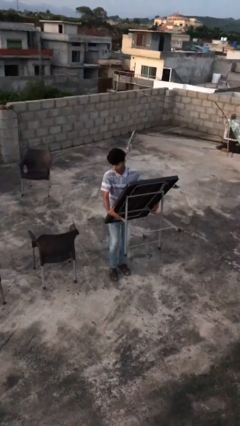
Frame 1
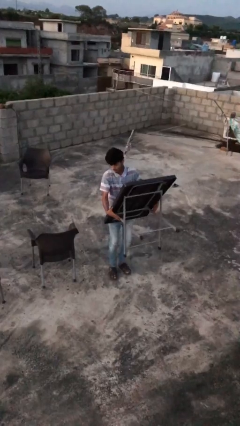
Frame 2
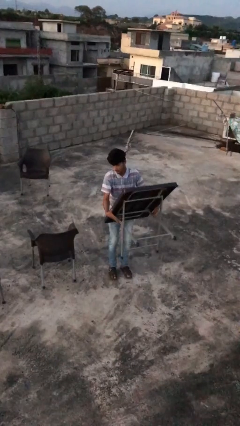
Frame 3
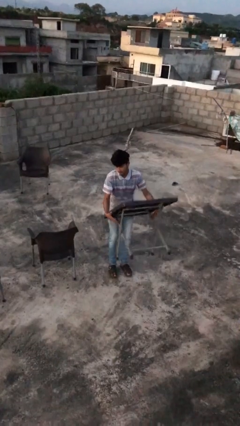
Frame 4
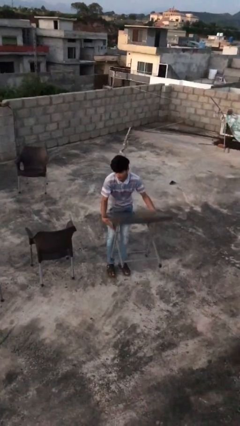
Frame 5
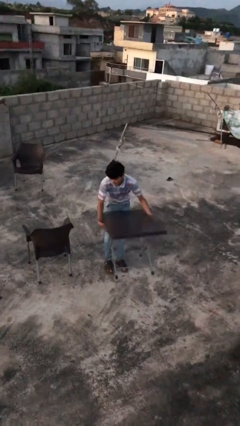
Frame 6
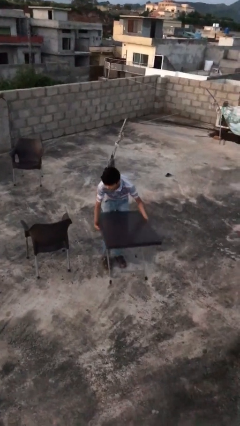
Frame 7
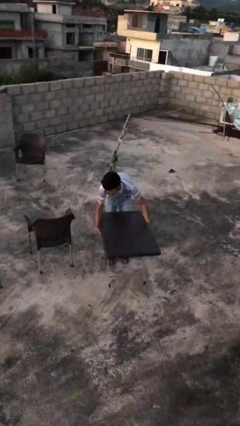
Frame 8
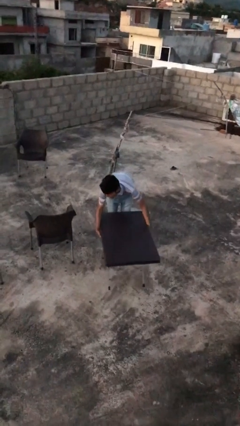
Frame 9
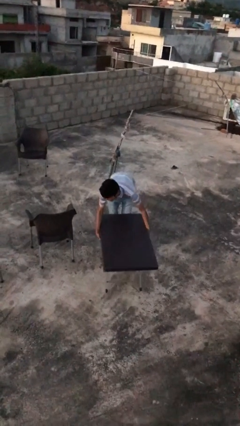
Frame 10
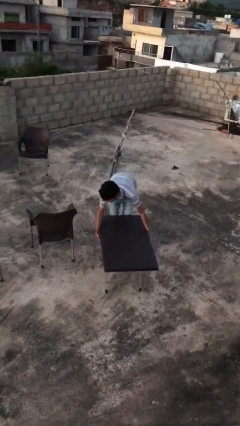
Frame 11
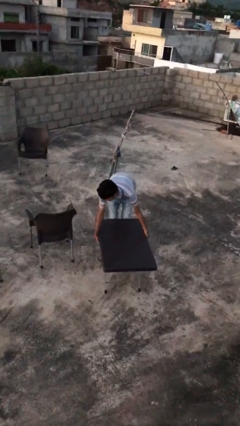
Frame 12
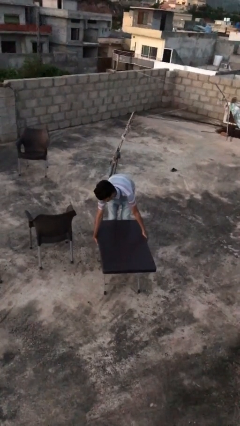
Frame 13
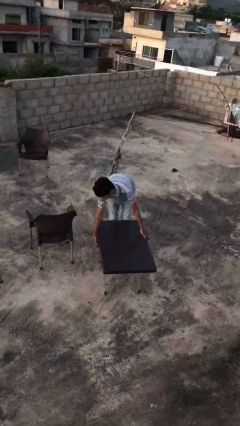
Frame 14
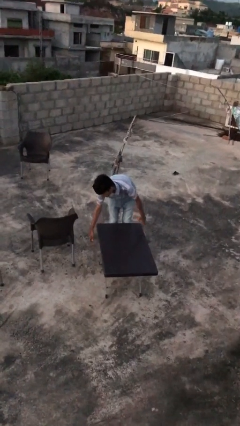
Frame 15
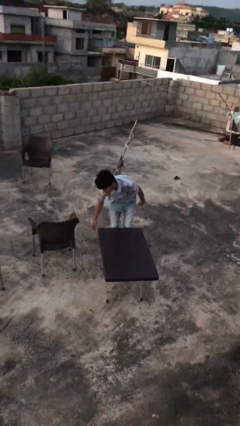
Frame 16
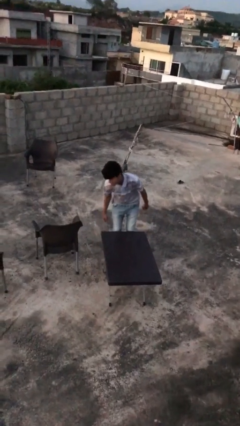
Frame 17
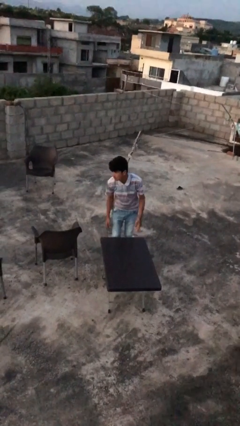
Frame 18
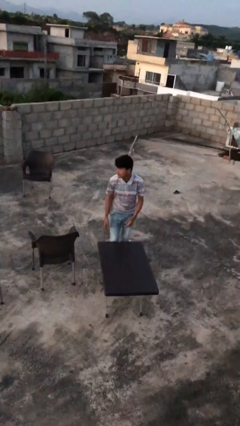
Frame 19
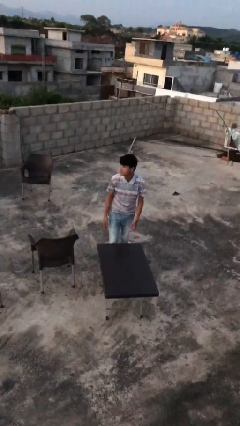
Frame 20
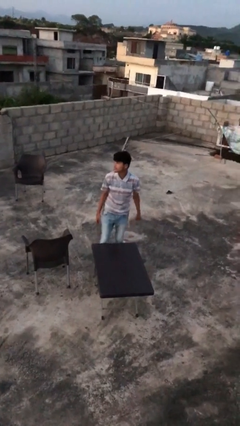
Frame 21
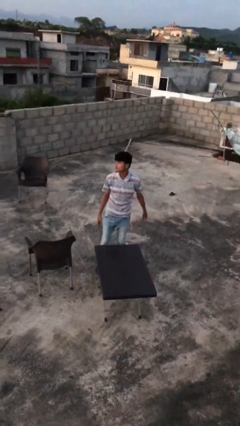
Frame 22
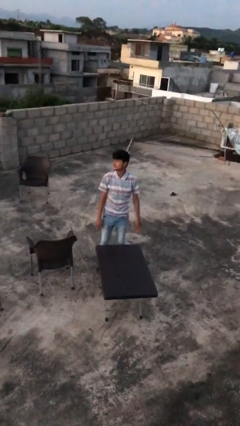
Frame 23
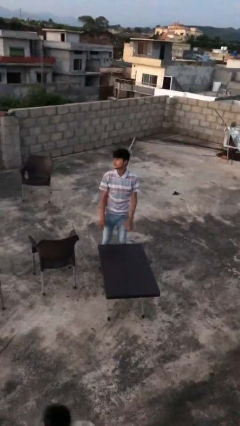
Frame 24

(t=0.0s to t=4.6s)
person puts down object on floor

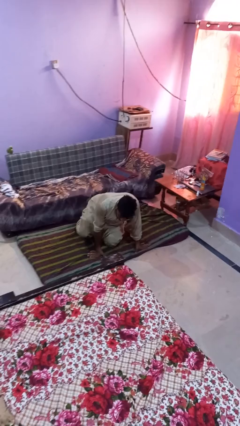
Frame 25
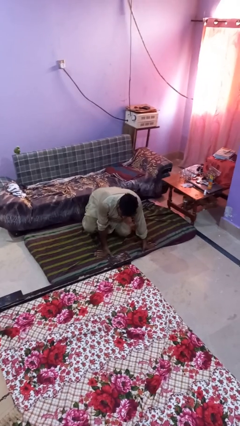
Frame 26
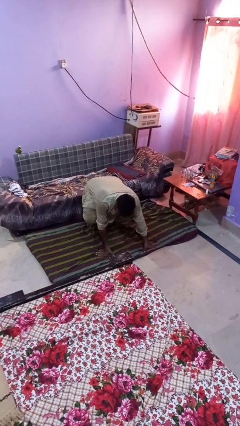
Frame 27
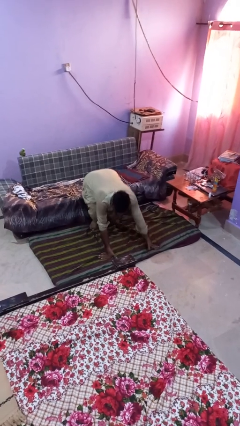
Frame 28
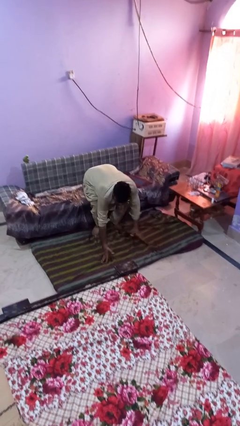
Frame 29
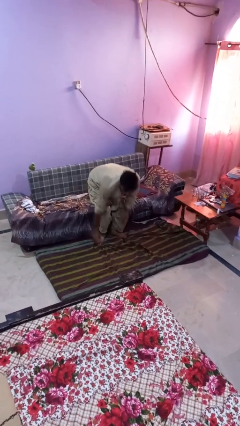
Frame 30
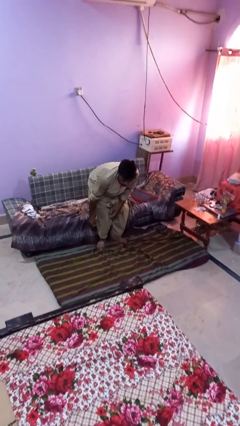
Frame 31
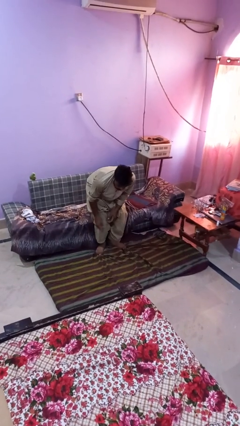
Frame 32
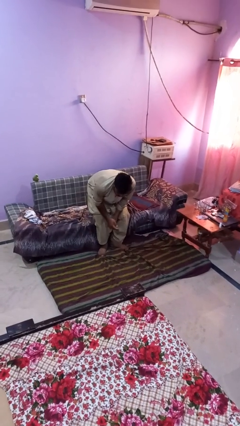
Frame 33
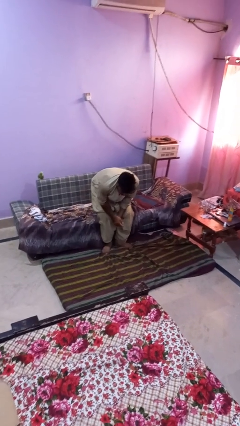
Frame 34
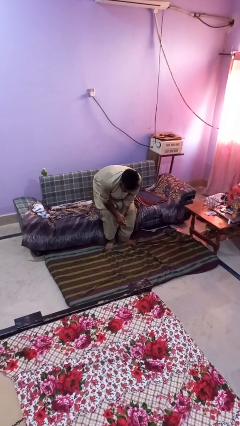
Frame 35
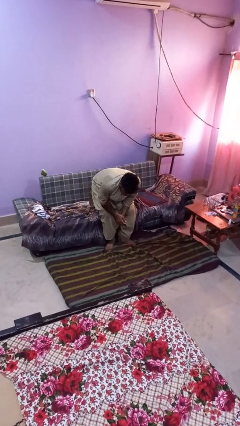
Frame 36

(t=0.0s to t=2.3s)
person stands up from floor

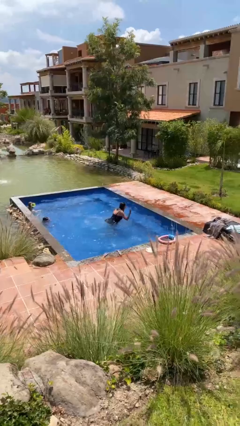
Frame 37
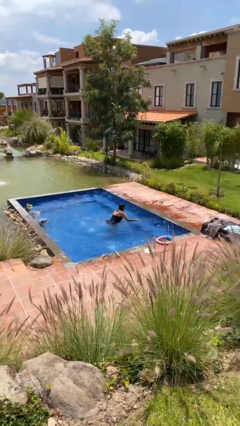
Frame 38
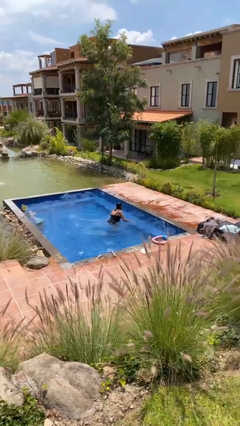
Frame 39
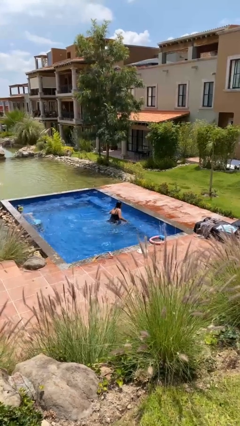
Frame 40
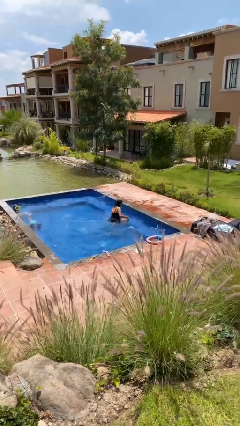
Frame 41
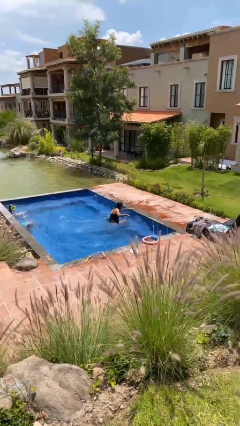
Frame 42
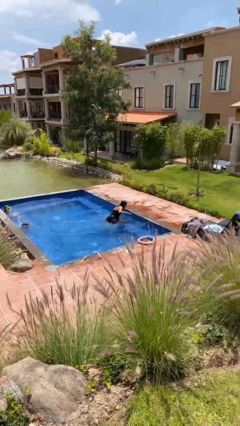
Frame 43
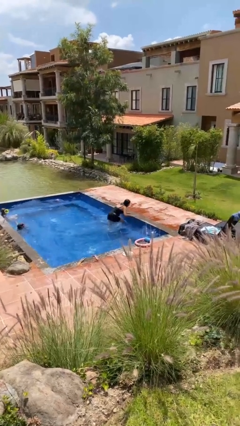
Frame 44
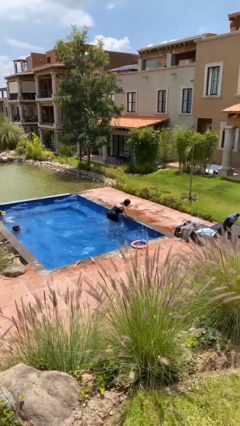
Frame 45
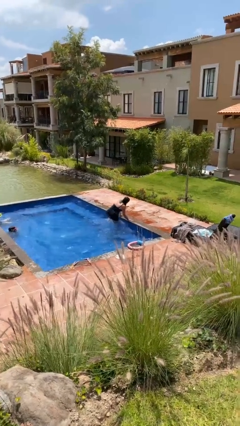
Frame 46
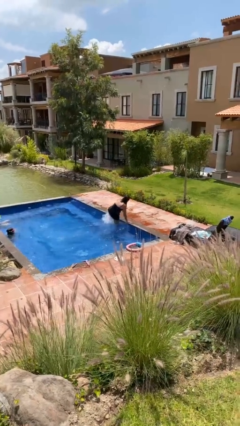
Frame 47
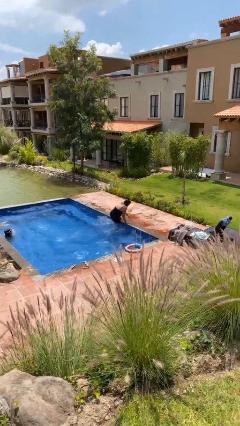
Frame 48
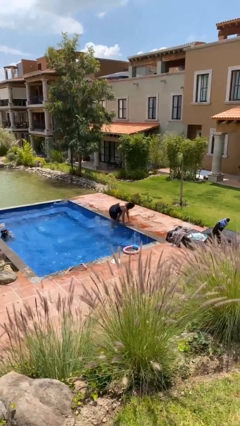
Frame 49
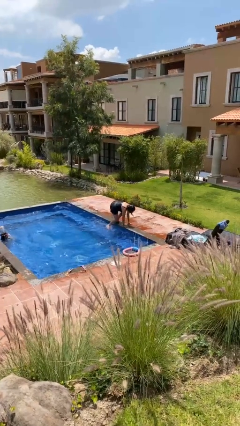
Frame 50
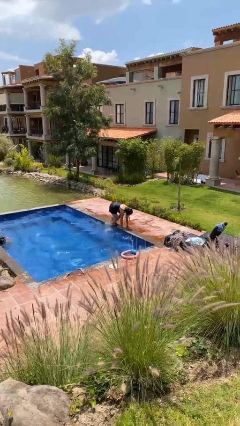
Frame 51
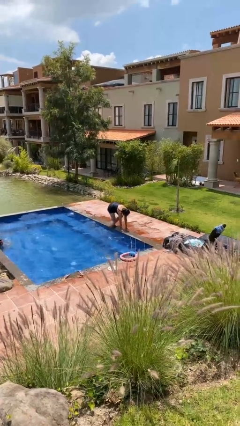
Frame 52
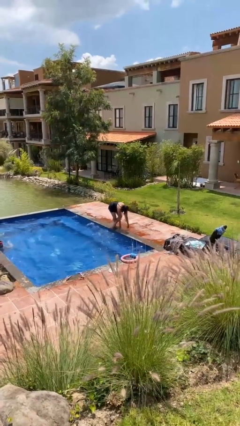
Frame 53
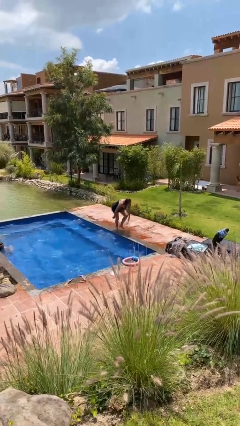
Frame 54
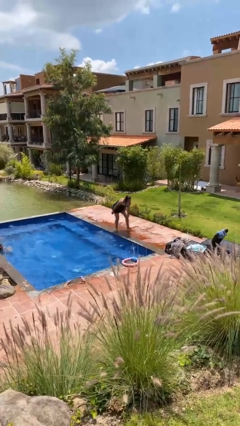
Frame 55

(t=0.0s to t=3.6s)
person exits pool

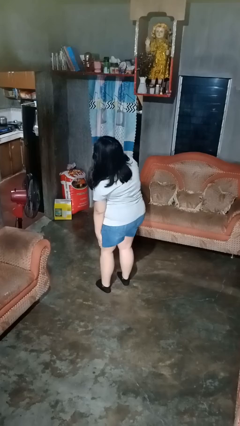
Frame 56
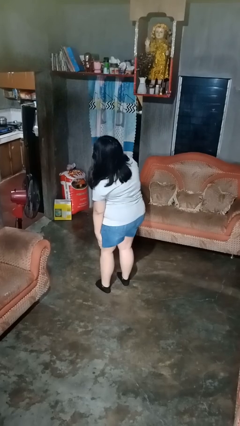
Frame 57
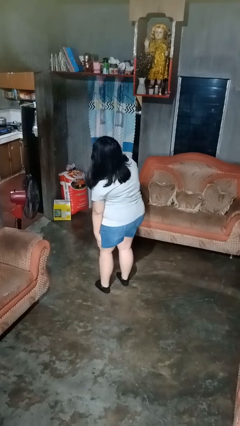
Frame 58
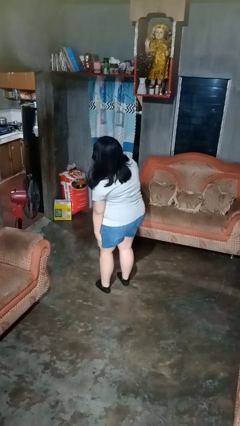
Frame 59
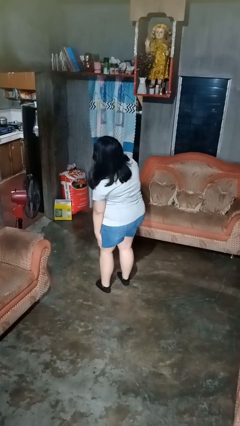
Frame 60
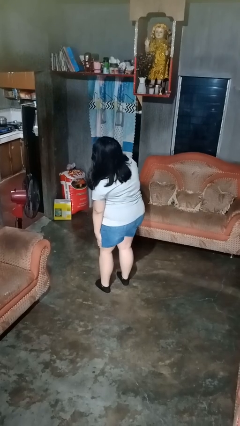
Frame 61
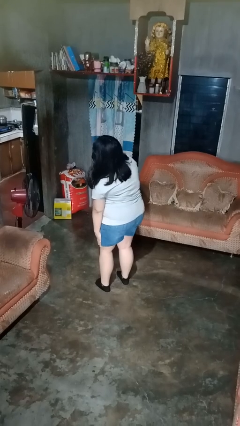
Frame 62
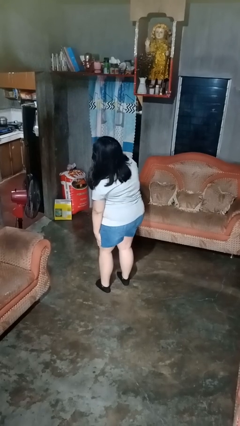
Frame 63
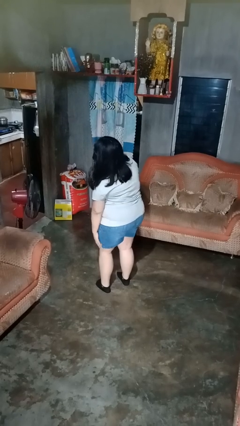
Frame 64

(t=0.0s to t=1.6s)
person swats bug

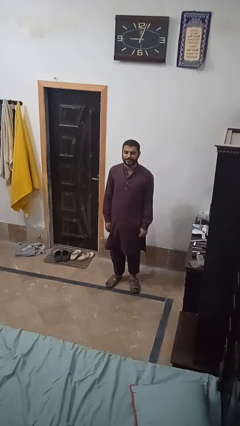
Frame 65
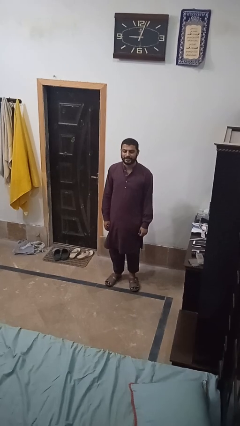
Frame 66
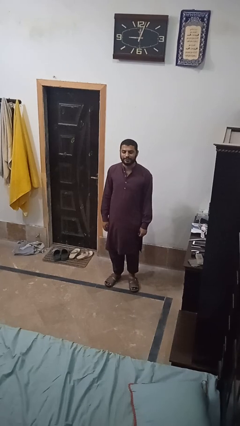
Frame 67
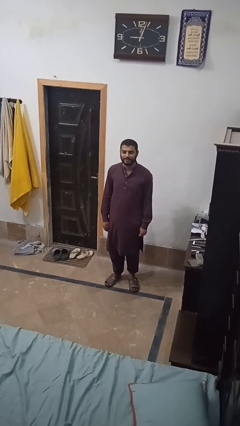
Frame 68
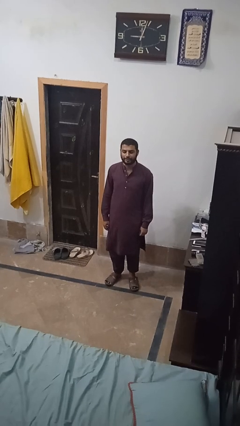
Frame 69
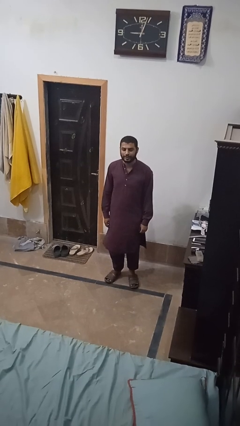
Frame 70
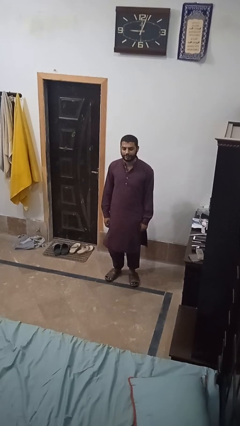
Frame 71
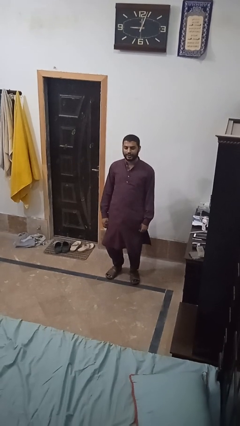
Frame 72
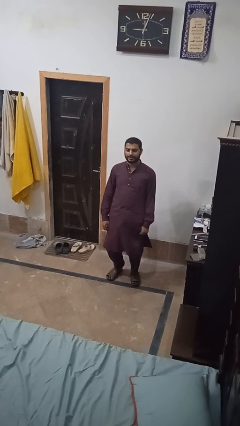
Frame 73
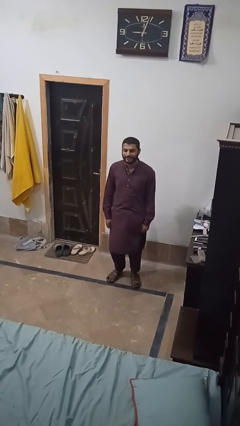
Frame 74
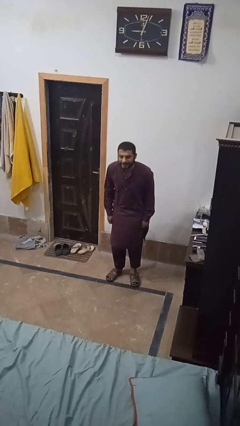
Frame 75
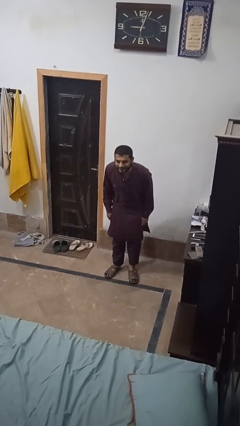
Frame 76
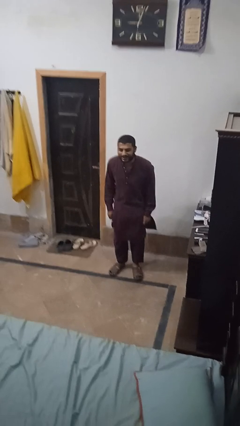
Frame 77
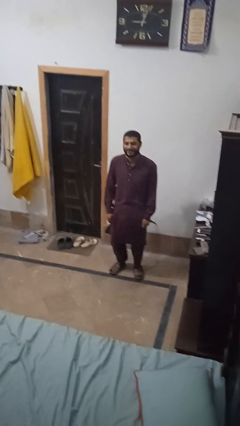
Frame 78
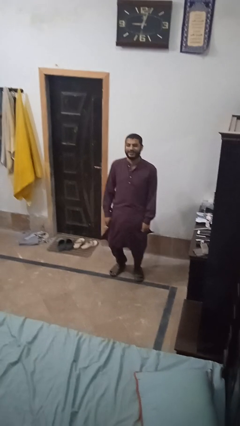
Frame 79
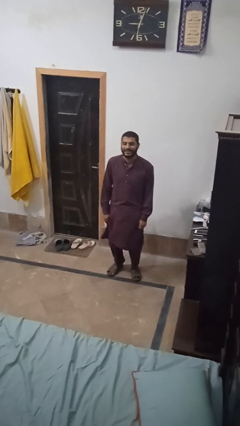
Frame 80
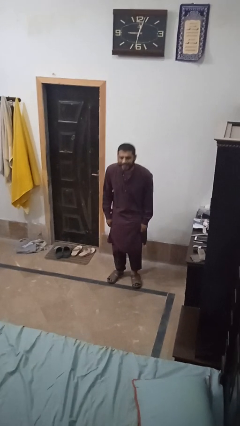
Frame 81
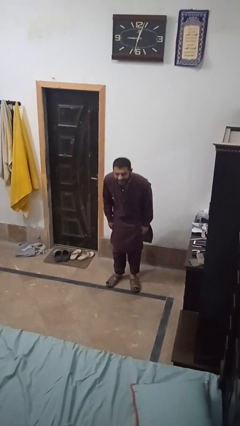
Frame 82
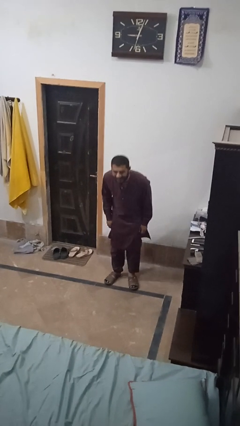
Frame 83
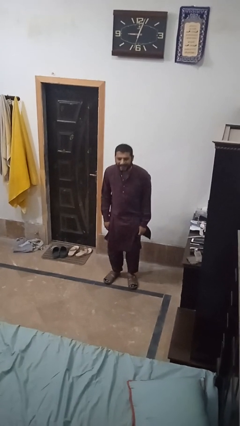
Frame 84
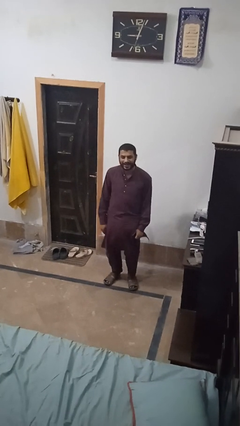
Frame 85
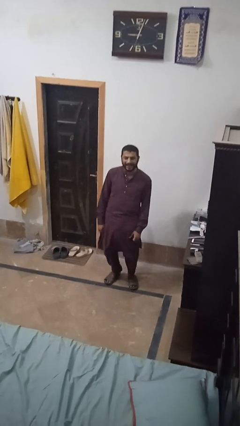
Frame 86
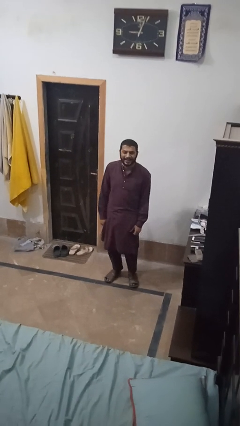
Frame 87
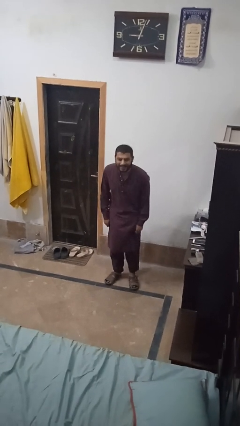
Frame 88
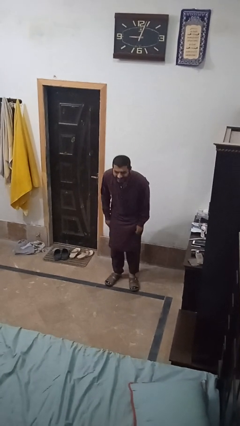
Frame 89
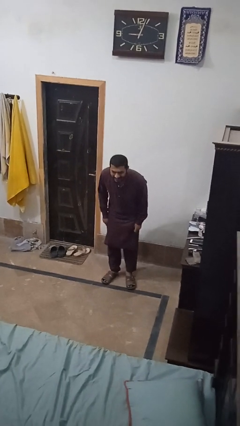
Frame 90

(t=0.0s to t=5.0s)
person wiggles hips

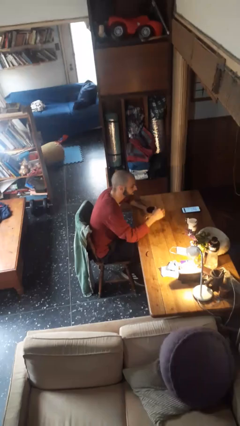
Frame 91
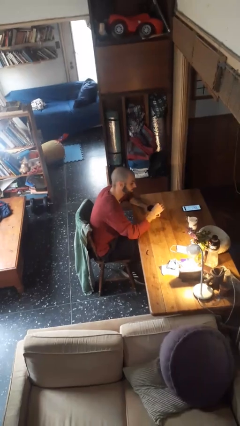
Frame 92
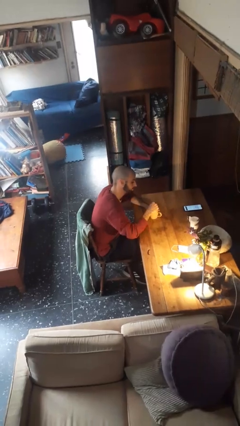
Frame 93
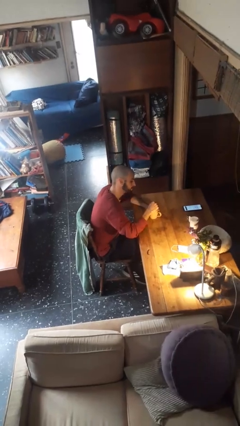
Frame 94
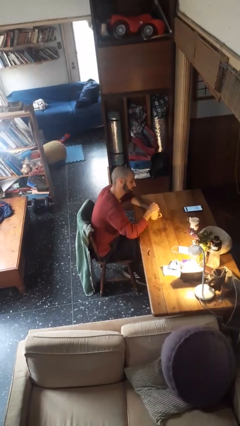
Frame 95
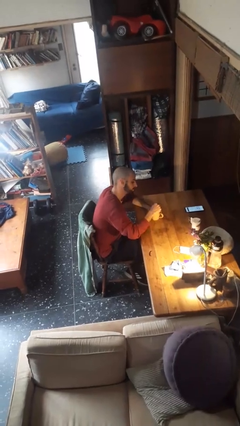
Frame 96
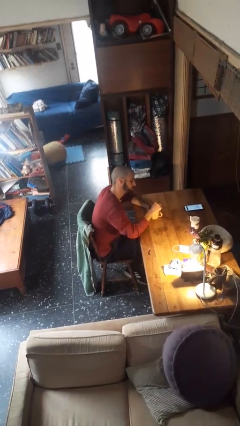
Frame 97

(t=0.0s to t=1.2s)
person stirs mug
